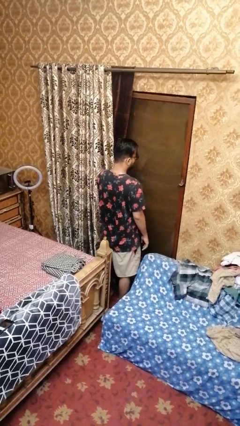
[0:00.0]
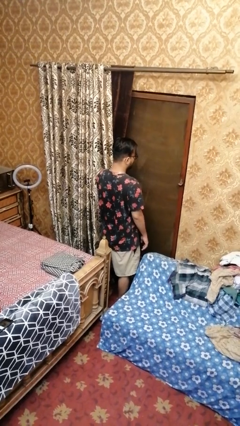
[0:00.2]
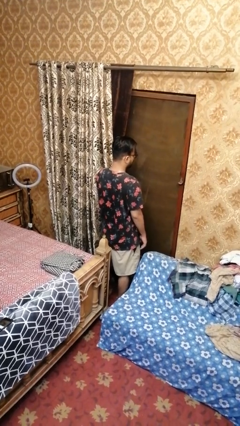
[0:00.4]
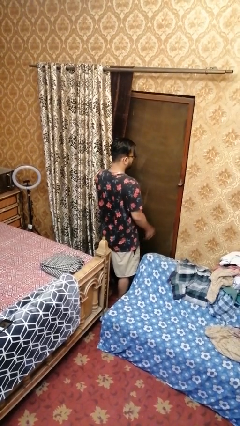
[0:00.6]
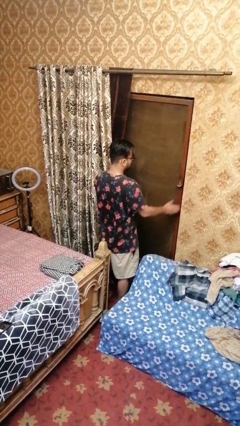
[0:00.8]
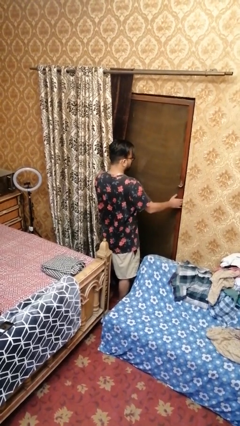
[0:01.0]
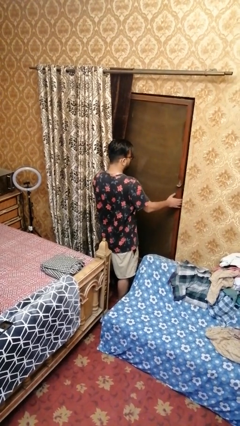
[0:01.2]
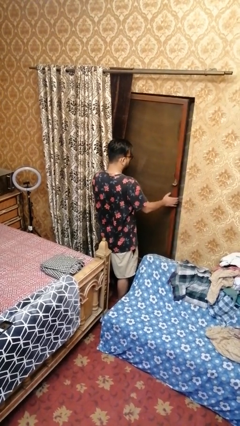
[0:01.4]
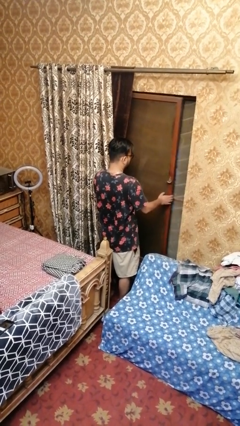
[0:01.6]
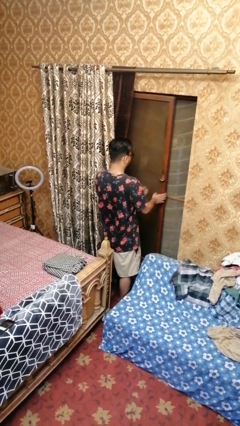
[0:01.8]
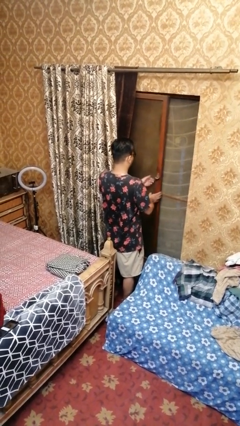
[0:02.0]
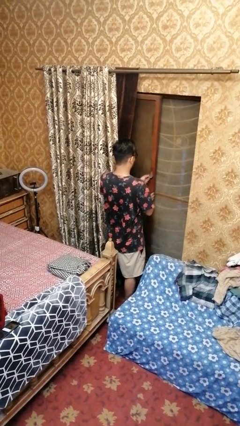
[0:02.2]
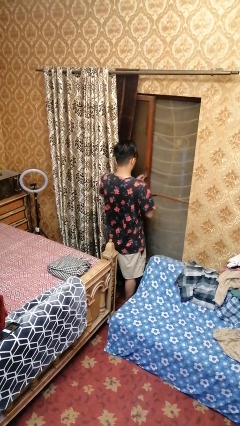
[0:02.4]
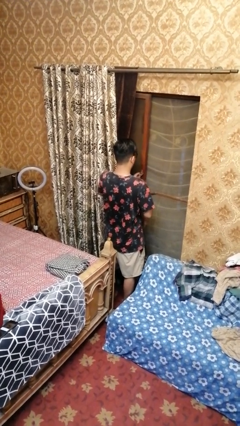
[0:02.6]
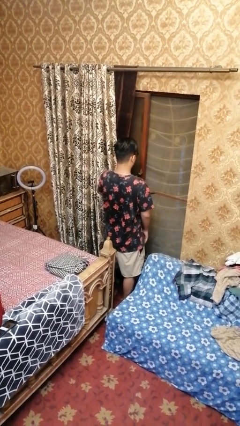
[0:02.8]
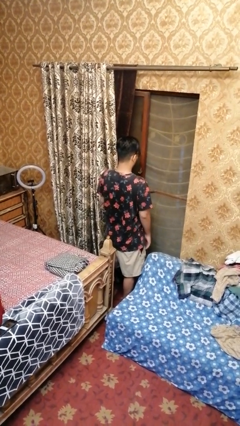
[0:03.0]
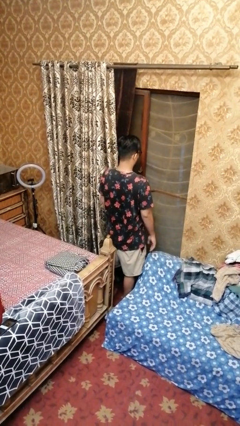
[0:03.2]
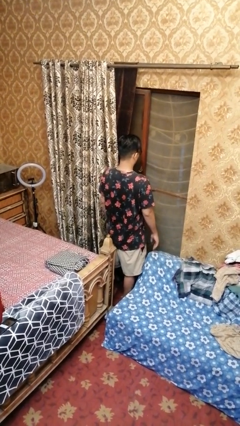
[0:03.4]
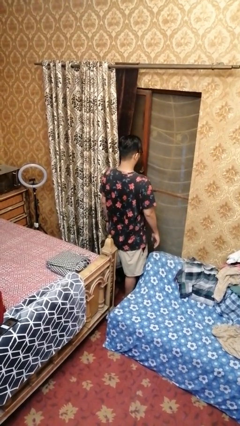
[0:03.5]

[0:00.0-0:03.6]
person opens home window

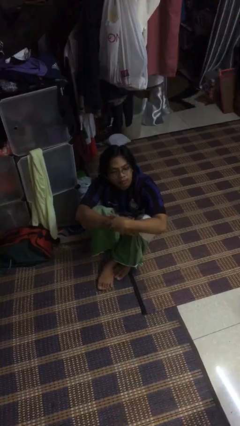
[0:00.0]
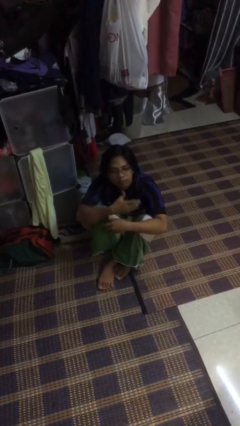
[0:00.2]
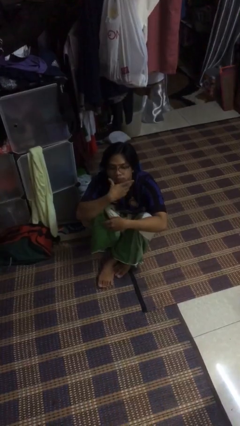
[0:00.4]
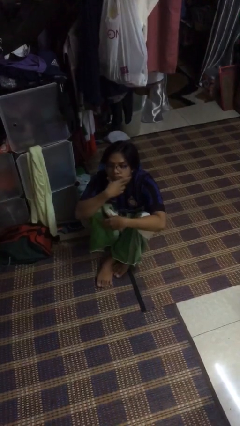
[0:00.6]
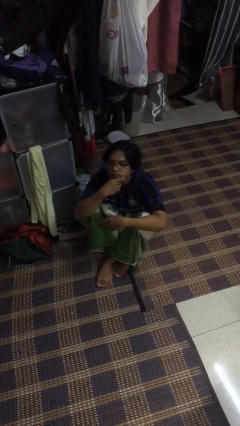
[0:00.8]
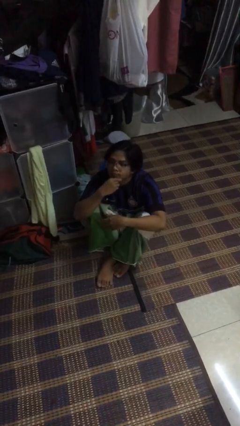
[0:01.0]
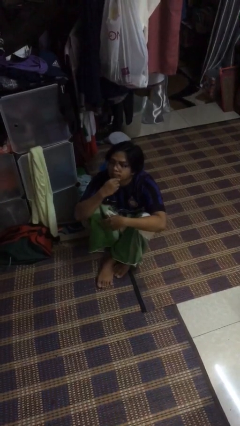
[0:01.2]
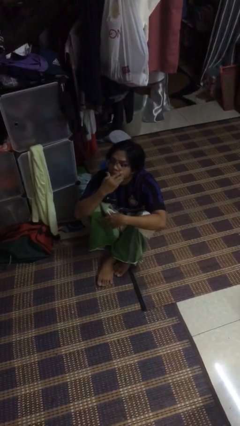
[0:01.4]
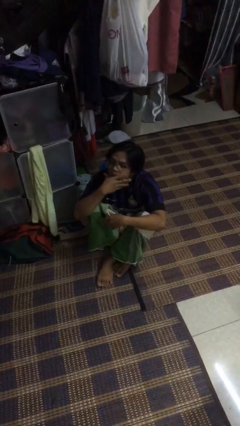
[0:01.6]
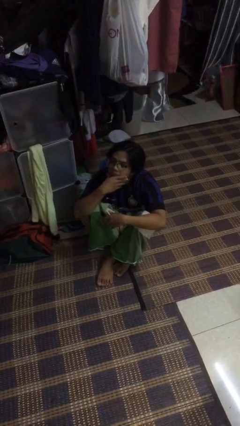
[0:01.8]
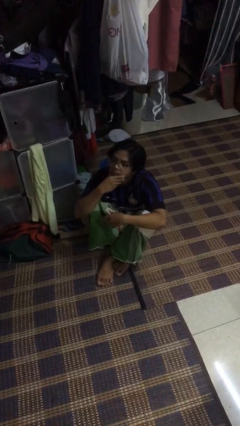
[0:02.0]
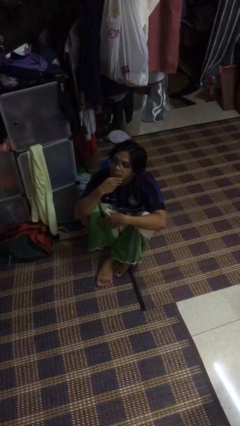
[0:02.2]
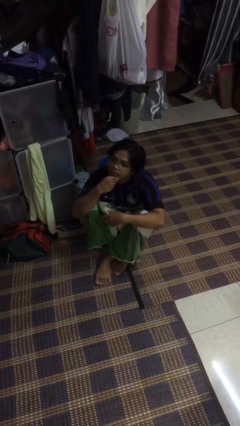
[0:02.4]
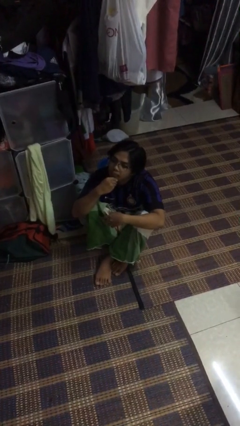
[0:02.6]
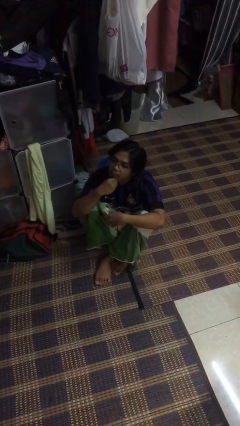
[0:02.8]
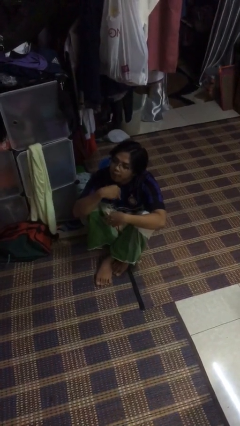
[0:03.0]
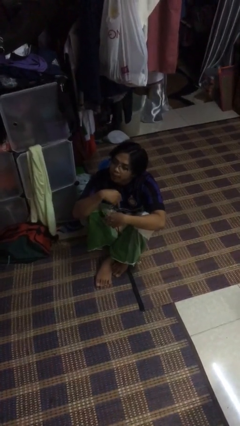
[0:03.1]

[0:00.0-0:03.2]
person strokes chin

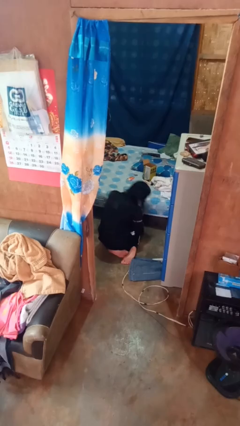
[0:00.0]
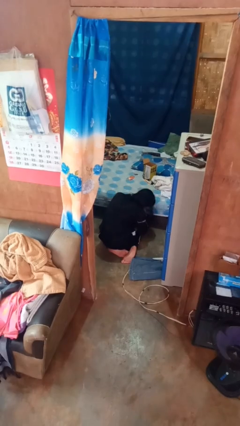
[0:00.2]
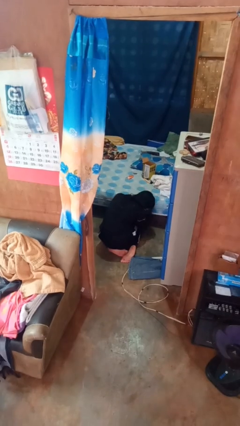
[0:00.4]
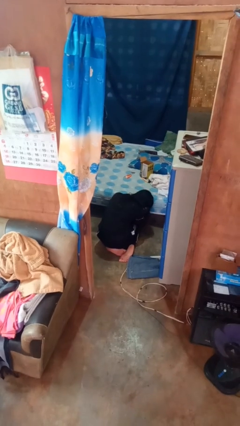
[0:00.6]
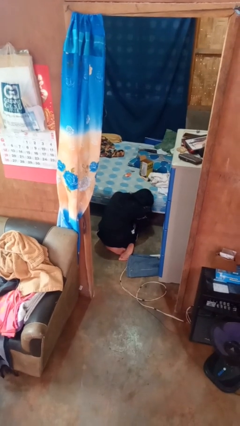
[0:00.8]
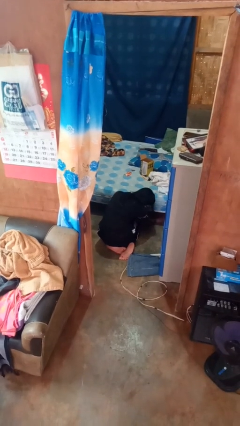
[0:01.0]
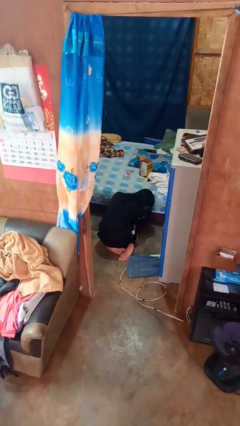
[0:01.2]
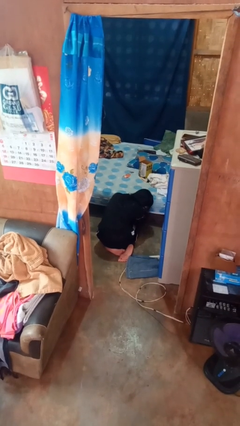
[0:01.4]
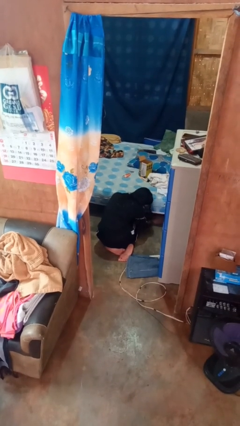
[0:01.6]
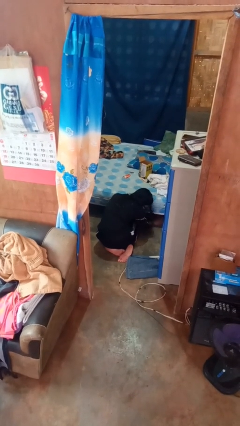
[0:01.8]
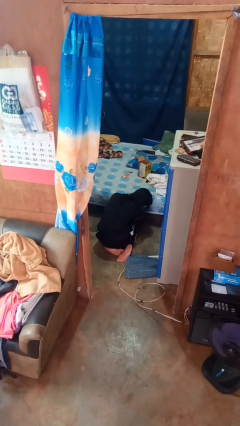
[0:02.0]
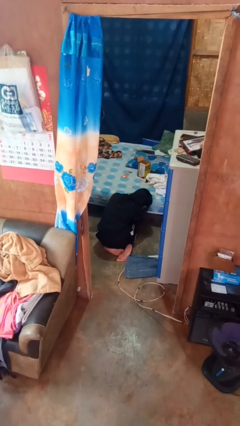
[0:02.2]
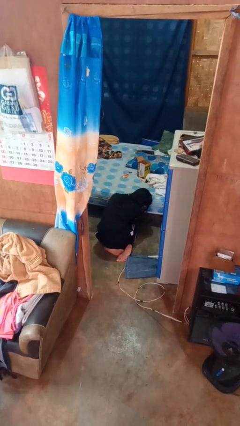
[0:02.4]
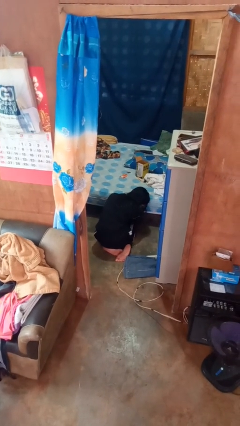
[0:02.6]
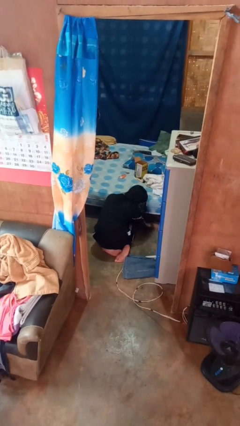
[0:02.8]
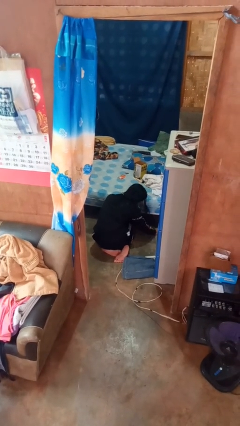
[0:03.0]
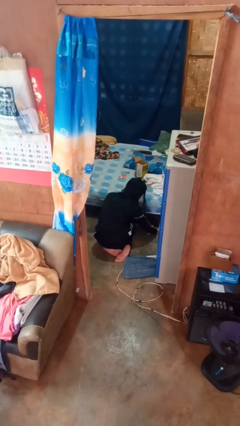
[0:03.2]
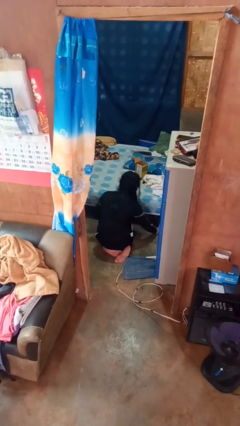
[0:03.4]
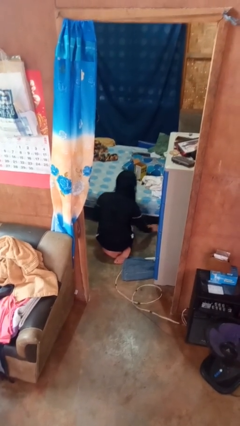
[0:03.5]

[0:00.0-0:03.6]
person searches under bed

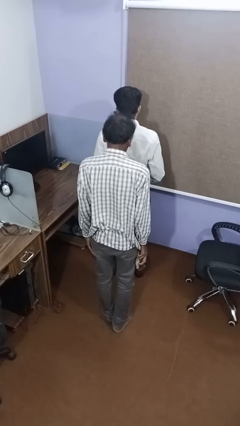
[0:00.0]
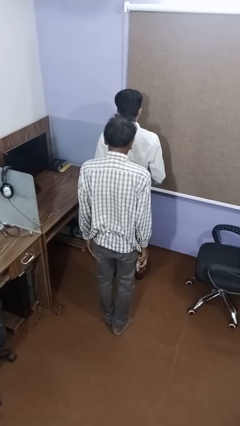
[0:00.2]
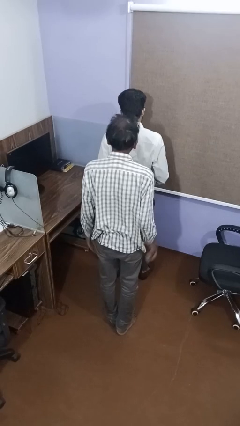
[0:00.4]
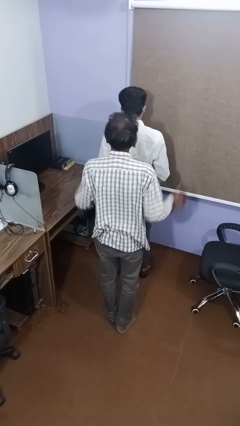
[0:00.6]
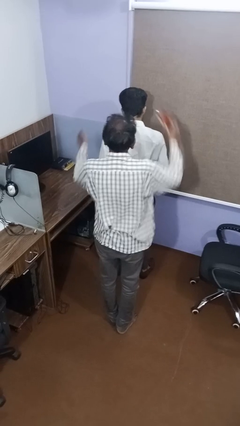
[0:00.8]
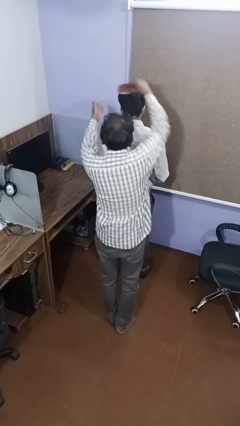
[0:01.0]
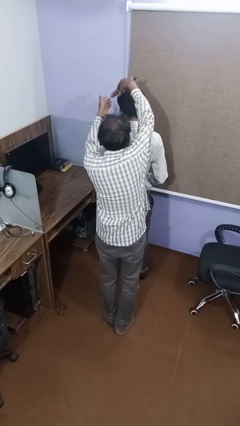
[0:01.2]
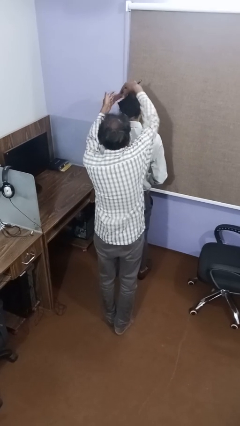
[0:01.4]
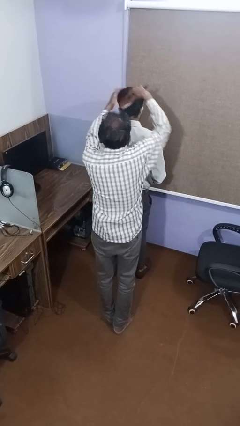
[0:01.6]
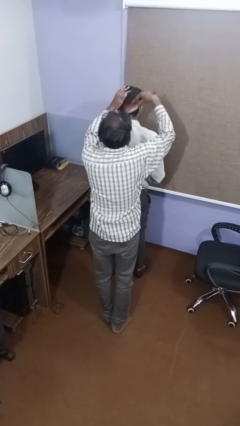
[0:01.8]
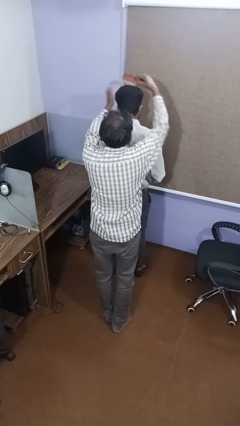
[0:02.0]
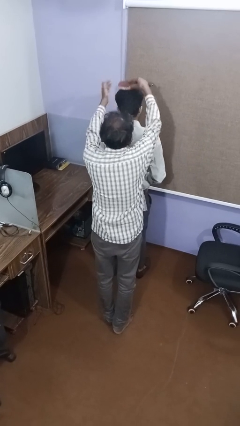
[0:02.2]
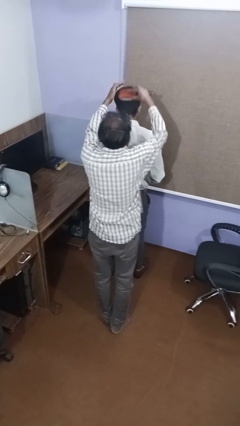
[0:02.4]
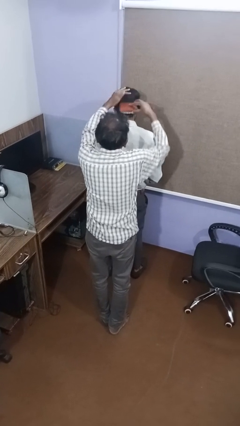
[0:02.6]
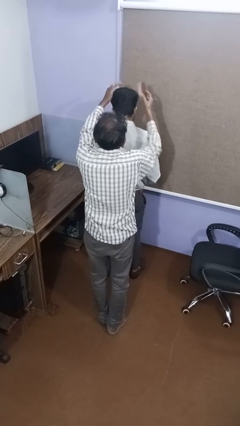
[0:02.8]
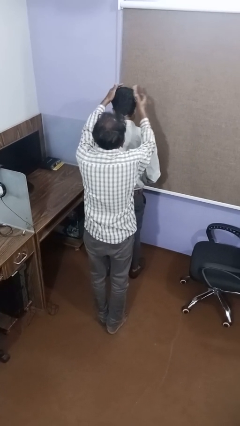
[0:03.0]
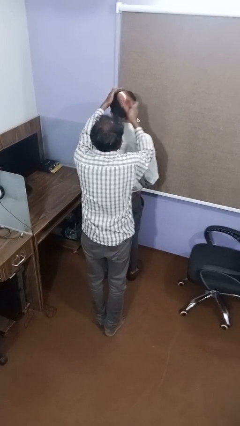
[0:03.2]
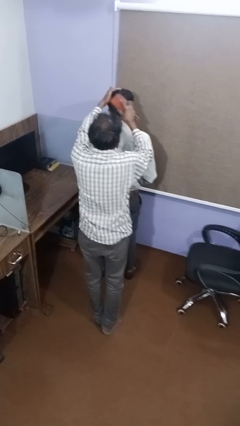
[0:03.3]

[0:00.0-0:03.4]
person brushes hair of person

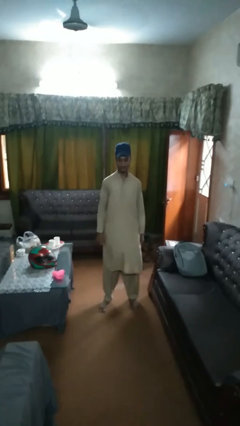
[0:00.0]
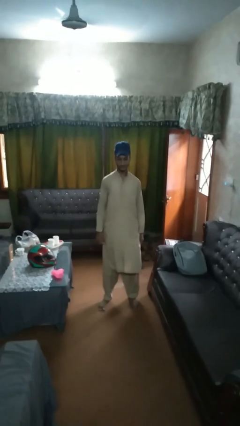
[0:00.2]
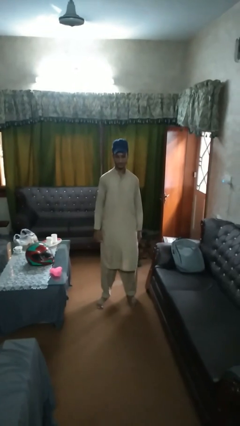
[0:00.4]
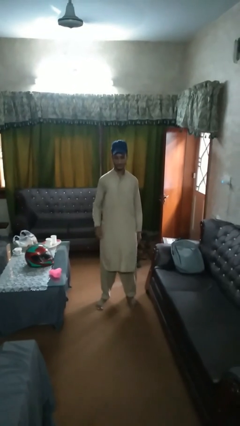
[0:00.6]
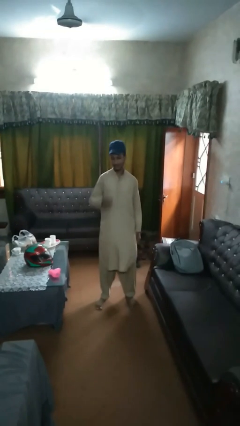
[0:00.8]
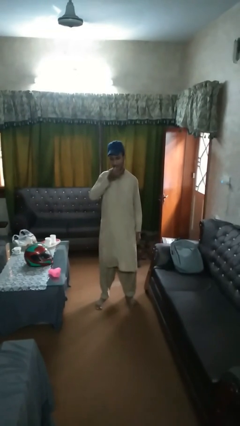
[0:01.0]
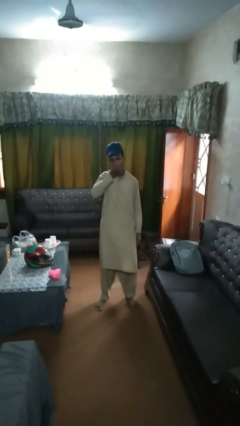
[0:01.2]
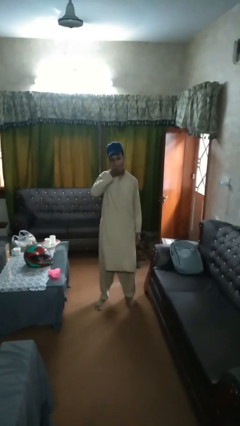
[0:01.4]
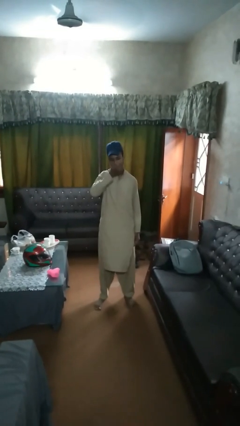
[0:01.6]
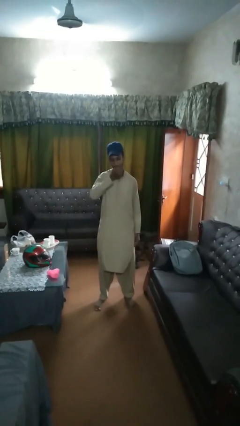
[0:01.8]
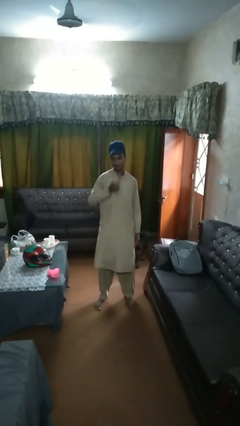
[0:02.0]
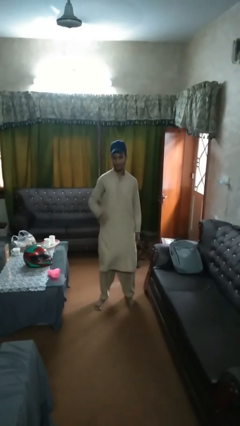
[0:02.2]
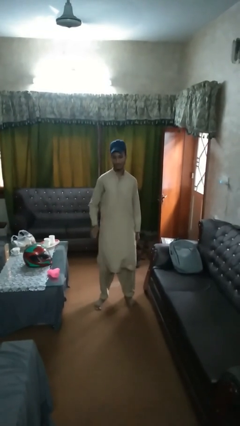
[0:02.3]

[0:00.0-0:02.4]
person eats apple

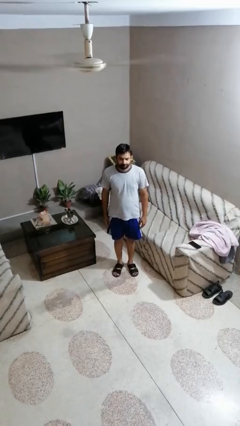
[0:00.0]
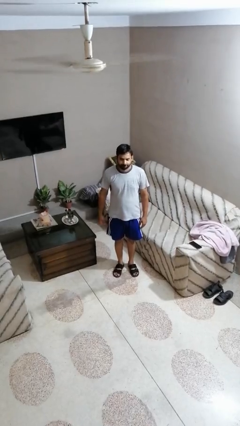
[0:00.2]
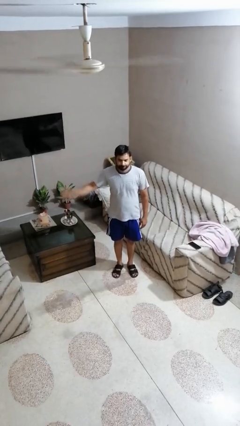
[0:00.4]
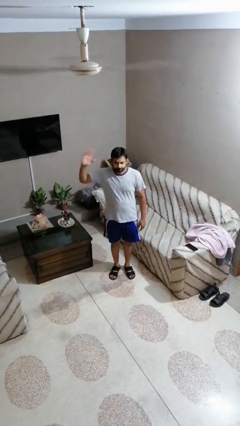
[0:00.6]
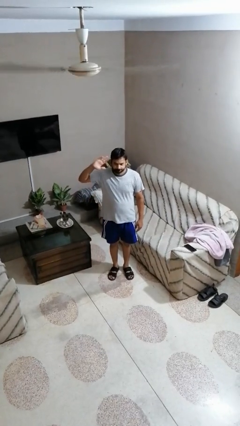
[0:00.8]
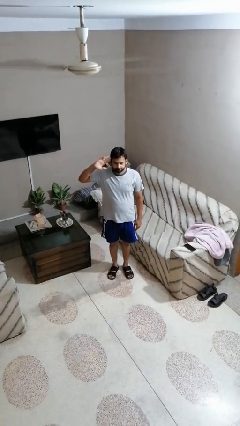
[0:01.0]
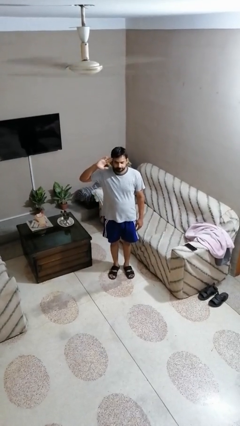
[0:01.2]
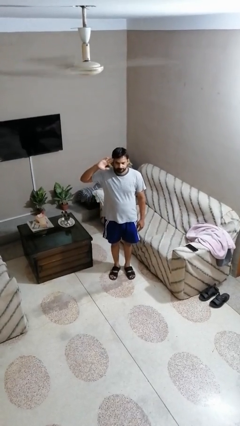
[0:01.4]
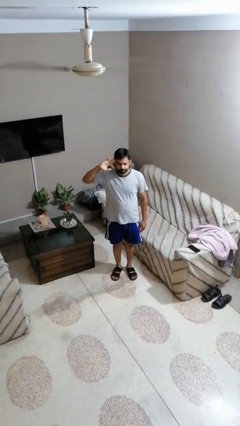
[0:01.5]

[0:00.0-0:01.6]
person salutes
